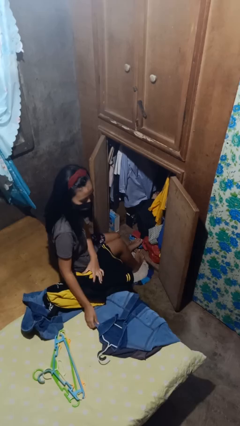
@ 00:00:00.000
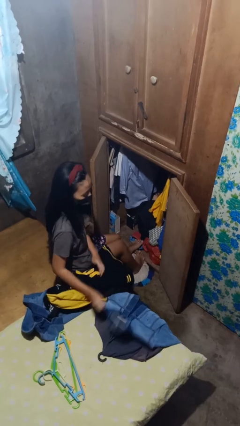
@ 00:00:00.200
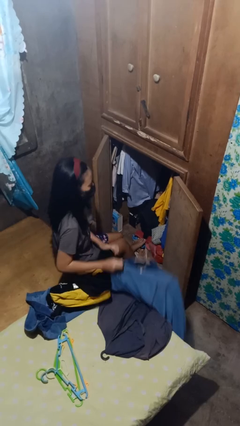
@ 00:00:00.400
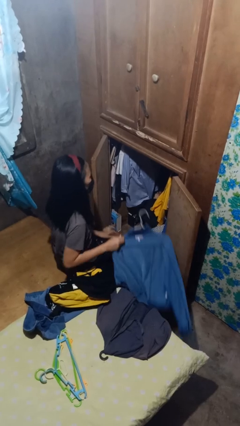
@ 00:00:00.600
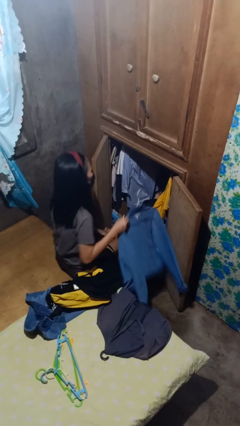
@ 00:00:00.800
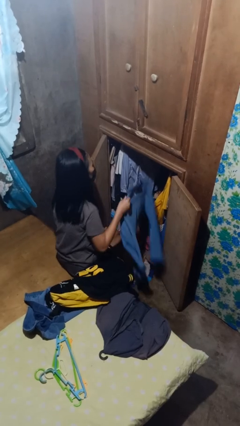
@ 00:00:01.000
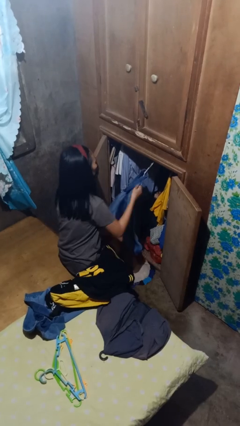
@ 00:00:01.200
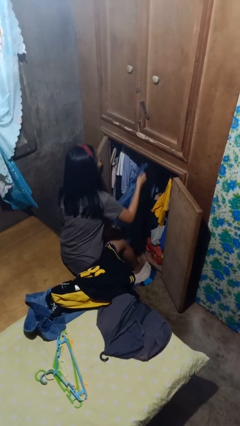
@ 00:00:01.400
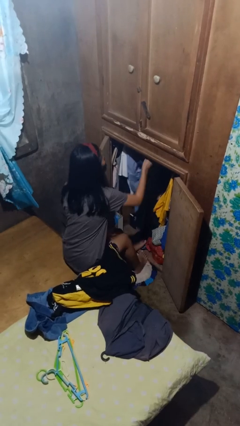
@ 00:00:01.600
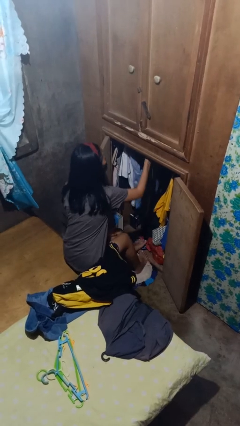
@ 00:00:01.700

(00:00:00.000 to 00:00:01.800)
person puts clothes into closet

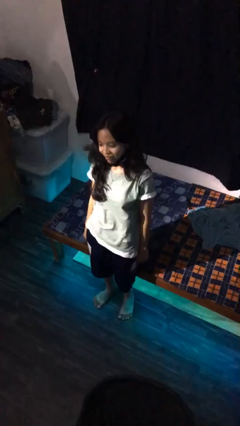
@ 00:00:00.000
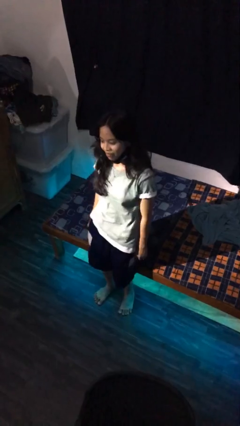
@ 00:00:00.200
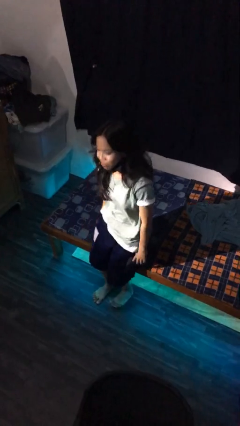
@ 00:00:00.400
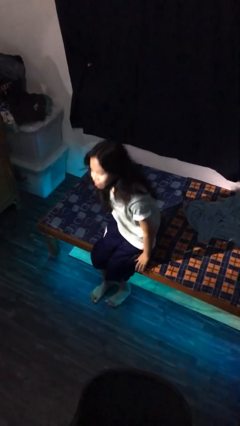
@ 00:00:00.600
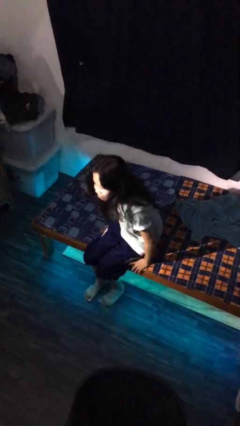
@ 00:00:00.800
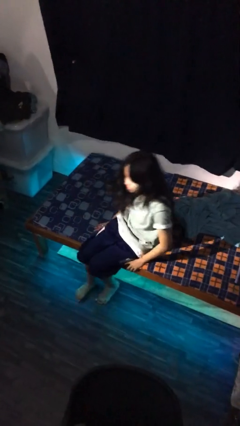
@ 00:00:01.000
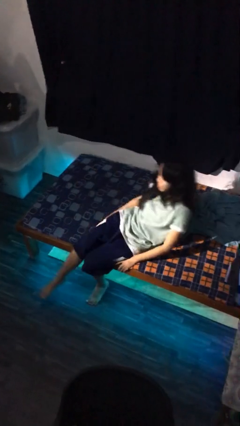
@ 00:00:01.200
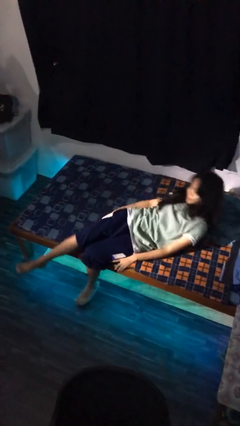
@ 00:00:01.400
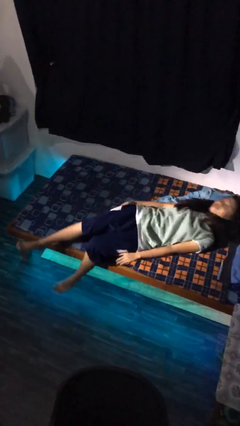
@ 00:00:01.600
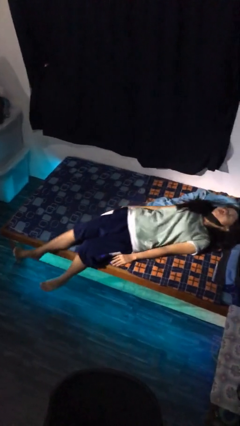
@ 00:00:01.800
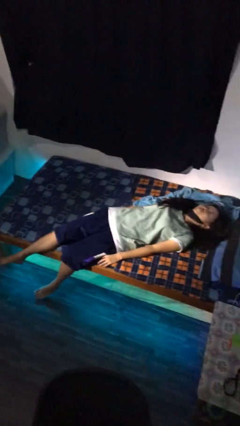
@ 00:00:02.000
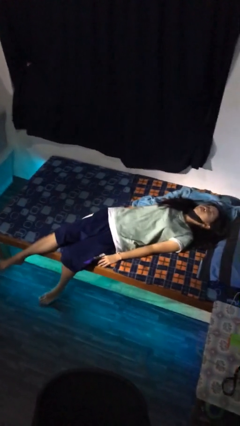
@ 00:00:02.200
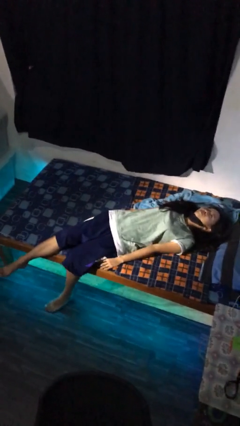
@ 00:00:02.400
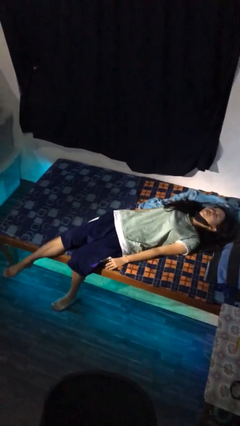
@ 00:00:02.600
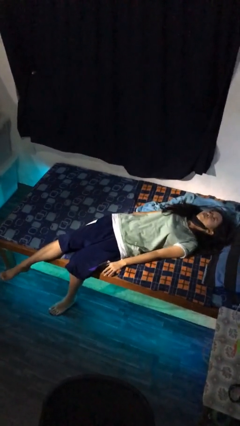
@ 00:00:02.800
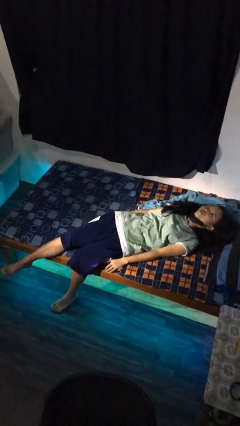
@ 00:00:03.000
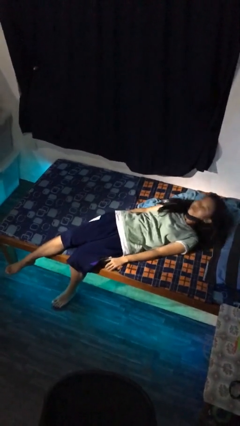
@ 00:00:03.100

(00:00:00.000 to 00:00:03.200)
person lies down on bed

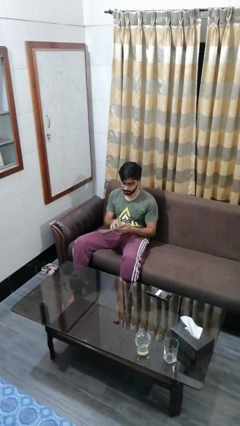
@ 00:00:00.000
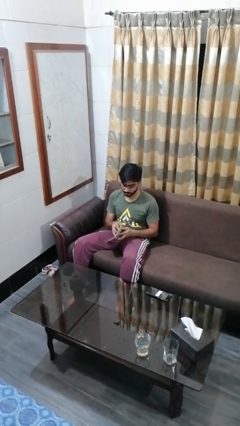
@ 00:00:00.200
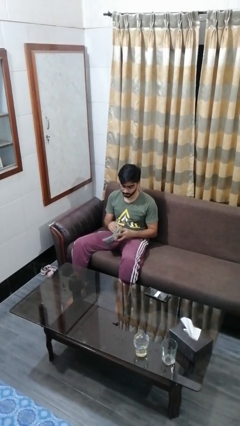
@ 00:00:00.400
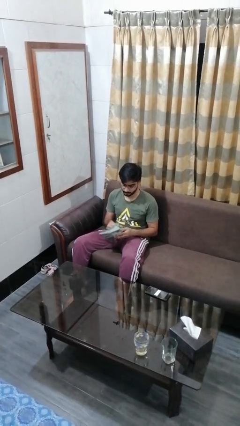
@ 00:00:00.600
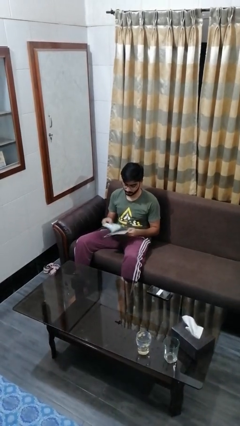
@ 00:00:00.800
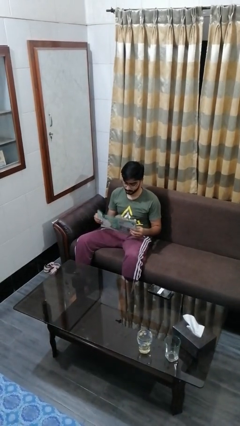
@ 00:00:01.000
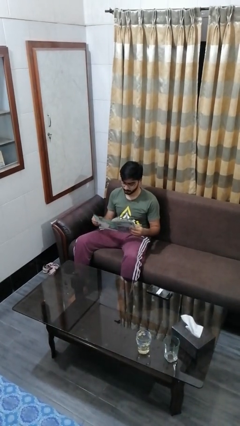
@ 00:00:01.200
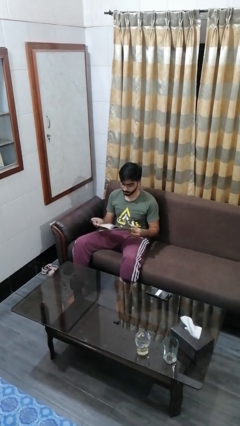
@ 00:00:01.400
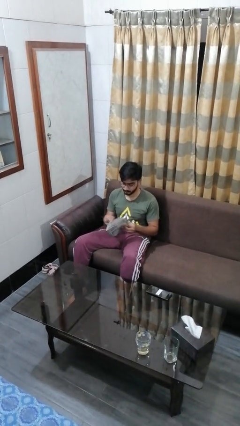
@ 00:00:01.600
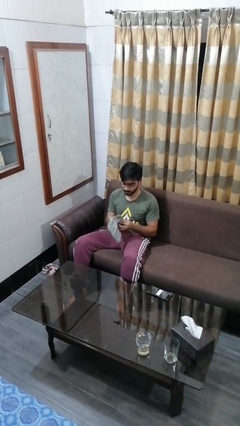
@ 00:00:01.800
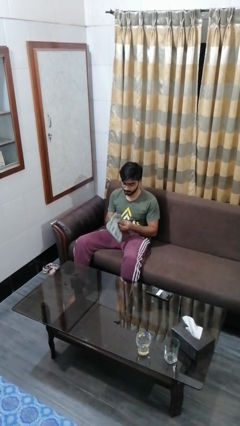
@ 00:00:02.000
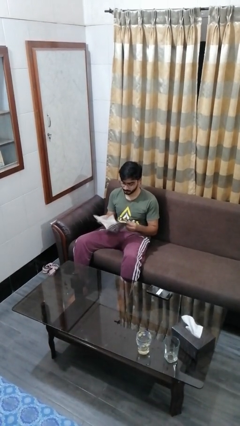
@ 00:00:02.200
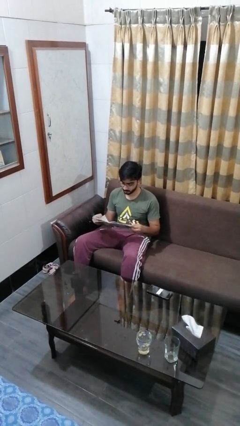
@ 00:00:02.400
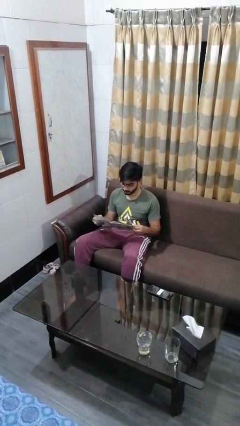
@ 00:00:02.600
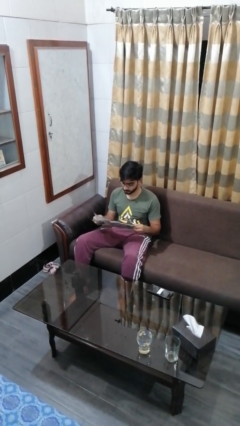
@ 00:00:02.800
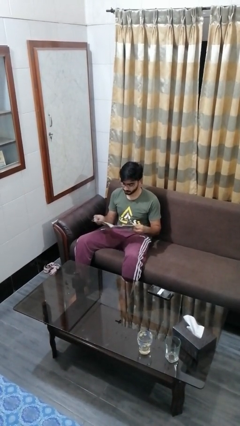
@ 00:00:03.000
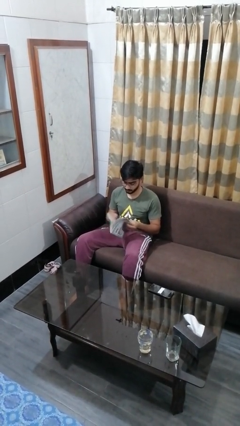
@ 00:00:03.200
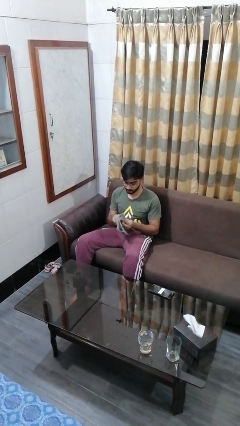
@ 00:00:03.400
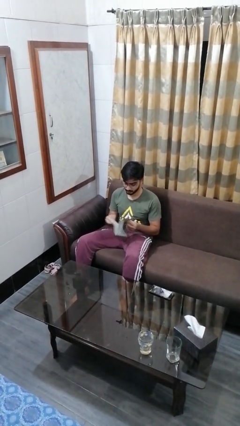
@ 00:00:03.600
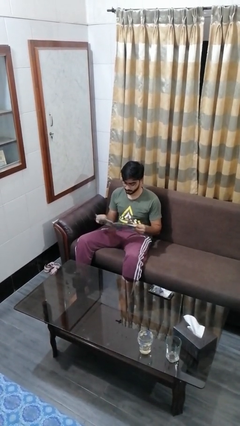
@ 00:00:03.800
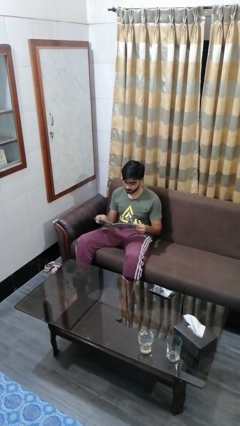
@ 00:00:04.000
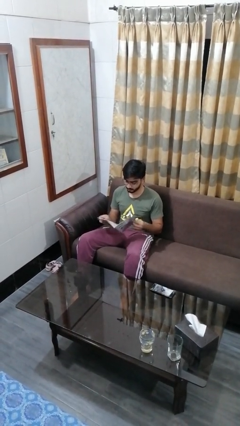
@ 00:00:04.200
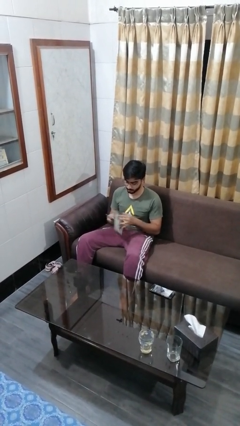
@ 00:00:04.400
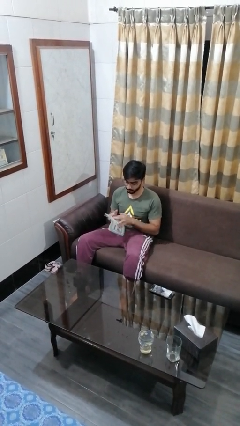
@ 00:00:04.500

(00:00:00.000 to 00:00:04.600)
person reads magazine

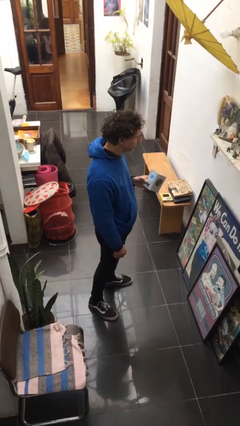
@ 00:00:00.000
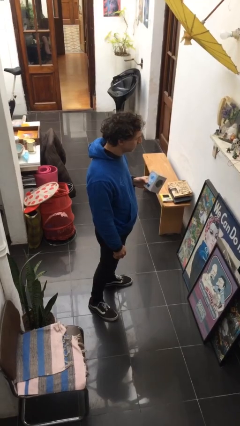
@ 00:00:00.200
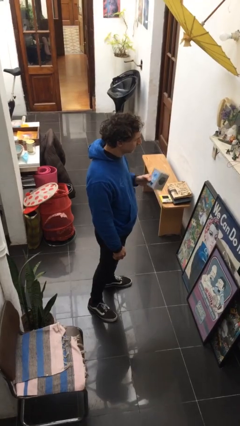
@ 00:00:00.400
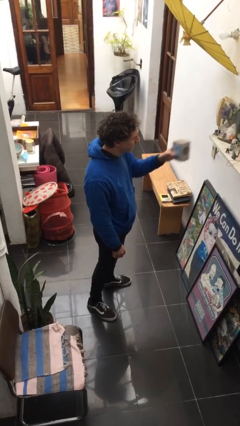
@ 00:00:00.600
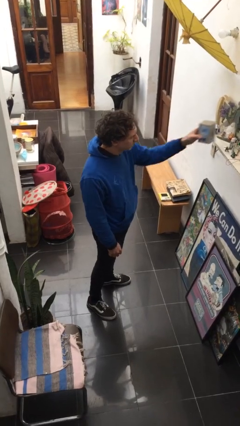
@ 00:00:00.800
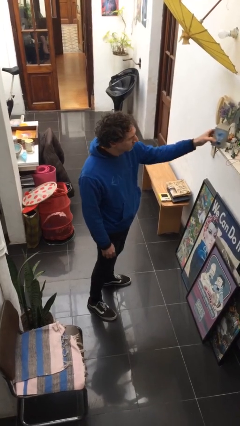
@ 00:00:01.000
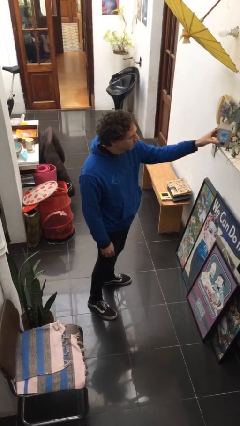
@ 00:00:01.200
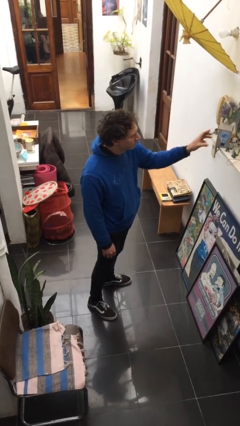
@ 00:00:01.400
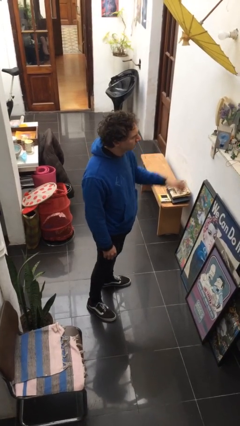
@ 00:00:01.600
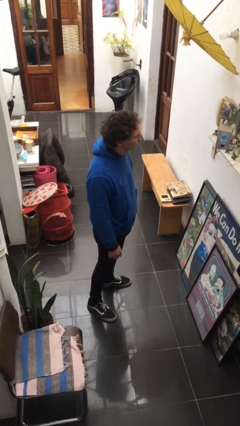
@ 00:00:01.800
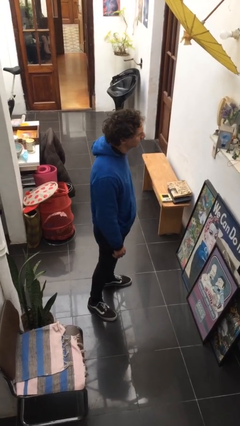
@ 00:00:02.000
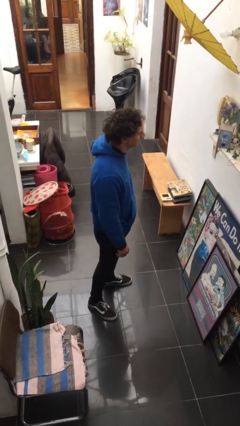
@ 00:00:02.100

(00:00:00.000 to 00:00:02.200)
person puts down object on countertop

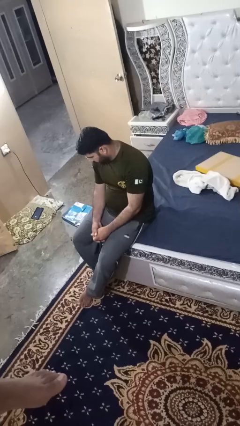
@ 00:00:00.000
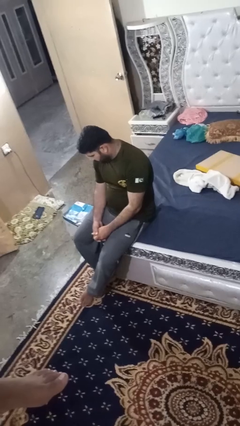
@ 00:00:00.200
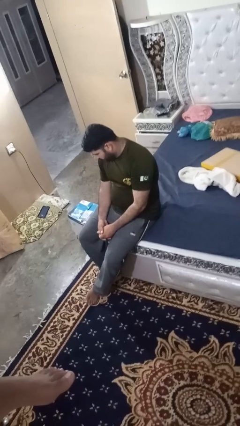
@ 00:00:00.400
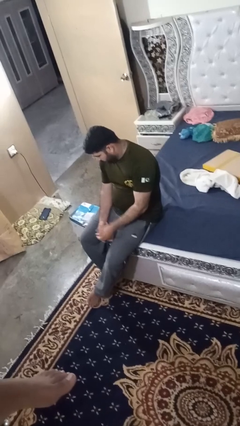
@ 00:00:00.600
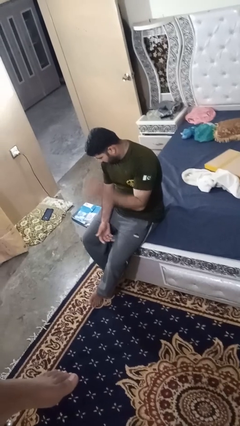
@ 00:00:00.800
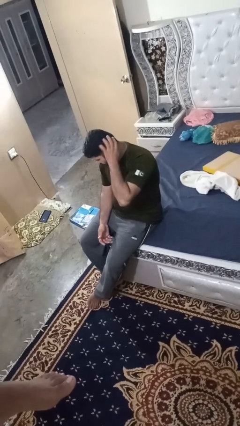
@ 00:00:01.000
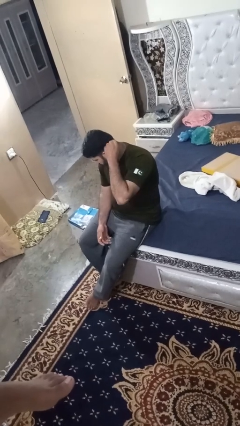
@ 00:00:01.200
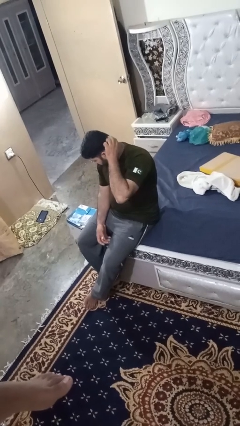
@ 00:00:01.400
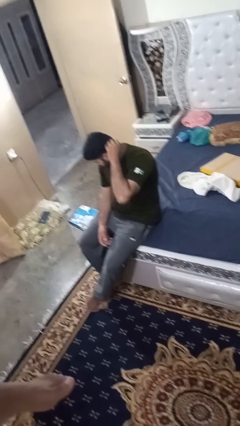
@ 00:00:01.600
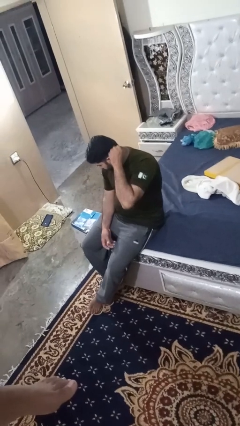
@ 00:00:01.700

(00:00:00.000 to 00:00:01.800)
person strokes hair

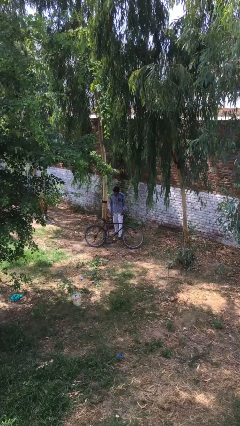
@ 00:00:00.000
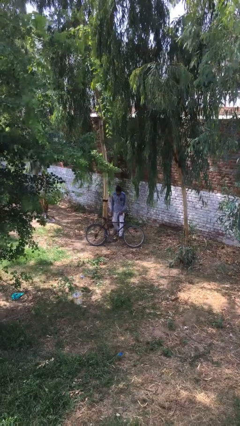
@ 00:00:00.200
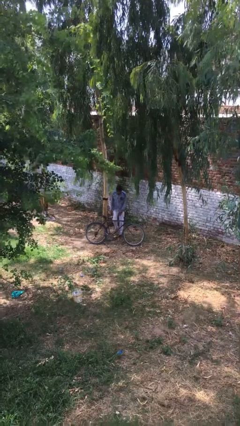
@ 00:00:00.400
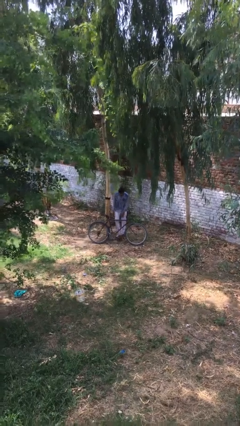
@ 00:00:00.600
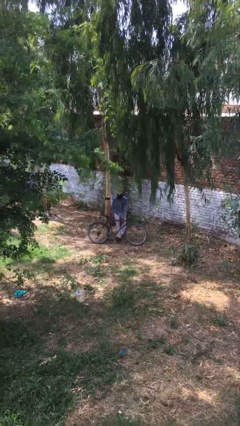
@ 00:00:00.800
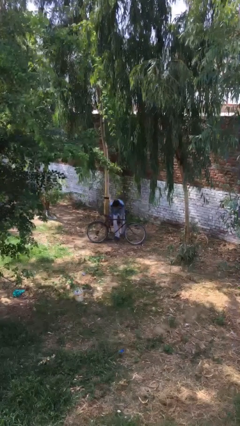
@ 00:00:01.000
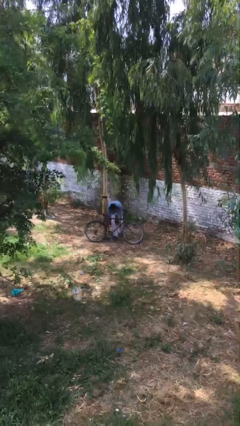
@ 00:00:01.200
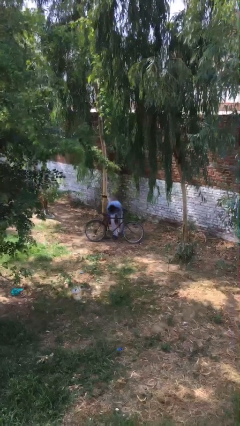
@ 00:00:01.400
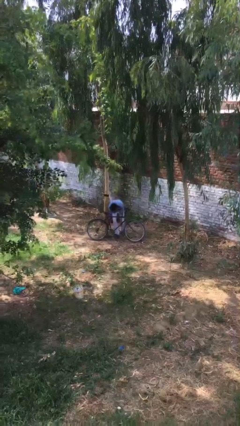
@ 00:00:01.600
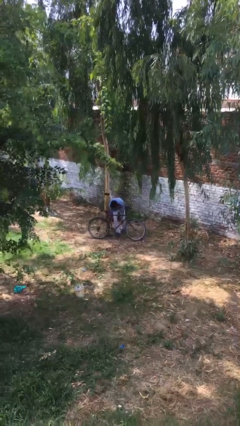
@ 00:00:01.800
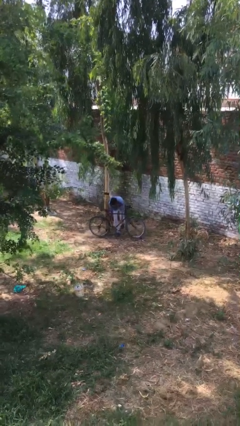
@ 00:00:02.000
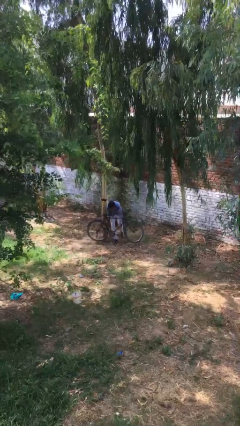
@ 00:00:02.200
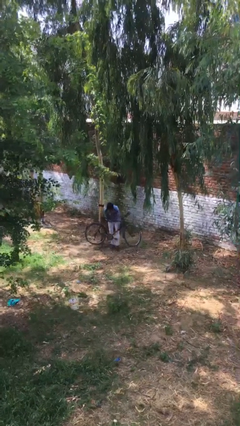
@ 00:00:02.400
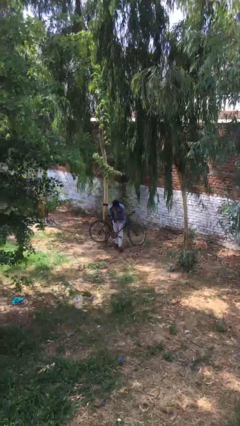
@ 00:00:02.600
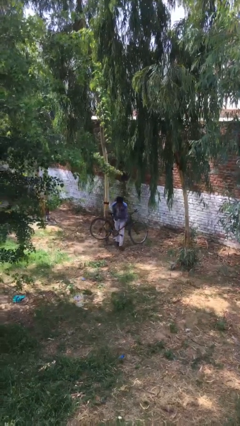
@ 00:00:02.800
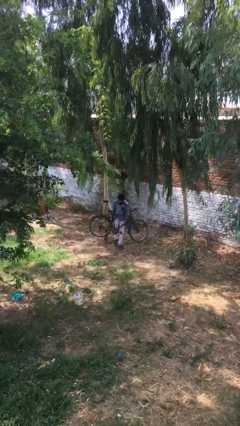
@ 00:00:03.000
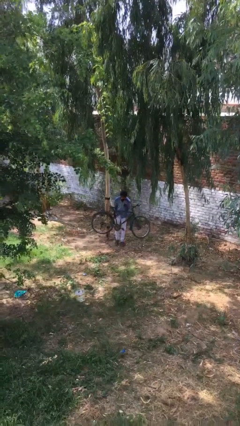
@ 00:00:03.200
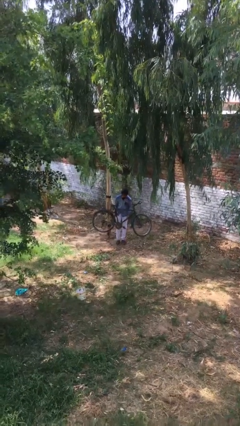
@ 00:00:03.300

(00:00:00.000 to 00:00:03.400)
person picks up object from floor
